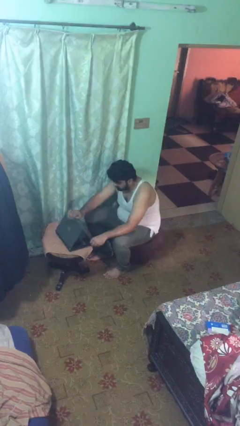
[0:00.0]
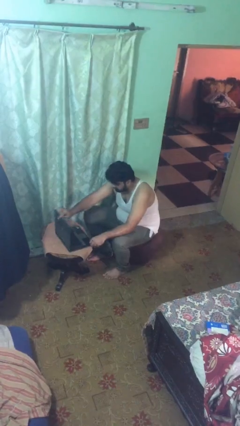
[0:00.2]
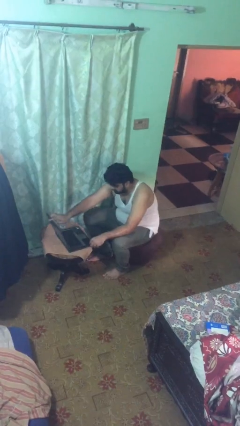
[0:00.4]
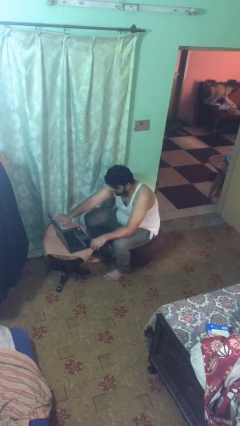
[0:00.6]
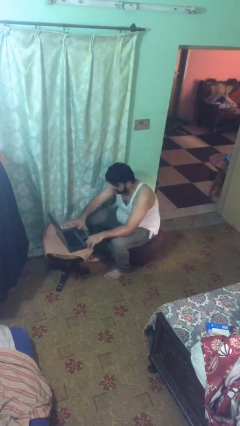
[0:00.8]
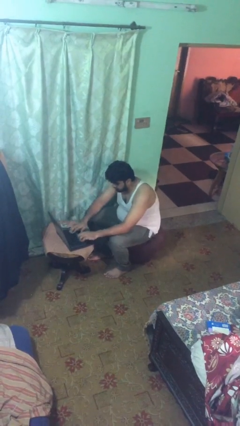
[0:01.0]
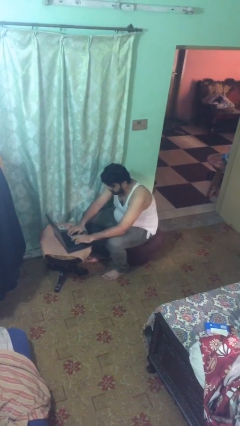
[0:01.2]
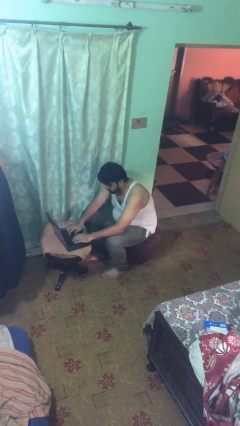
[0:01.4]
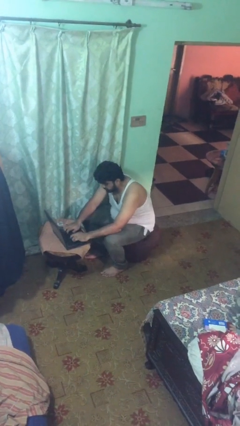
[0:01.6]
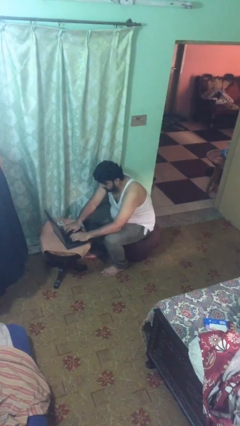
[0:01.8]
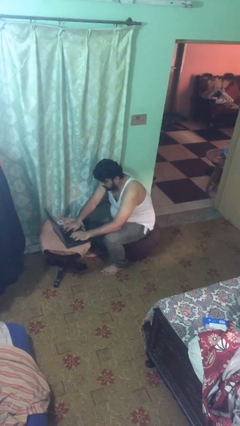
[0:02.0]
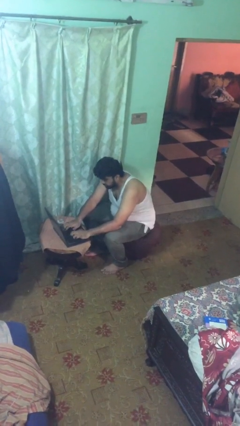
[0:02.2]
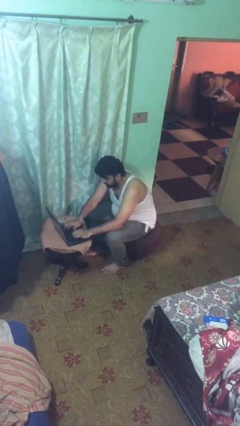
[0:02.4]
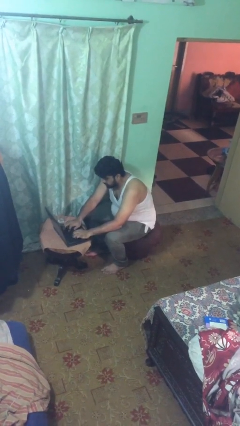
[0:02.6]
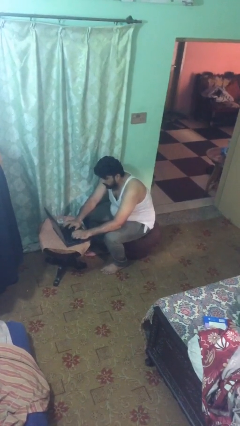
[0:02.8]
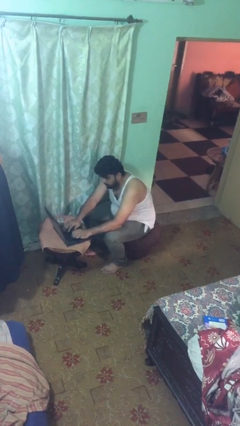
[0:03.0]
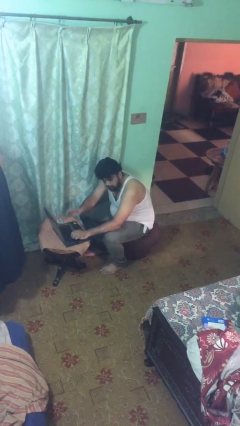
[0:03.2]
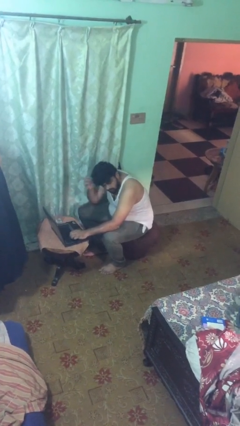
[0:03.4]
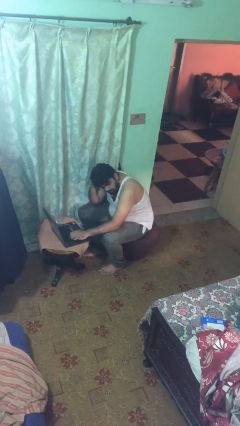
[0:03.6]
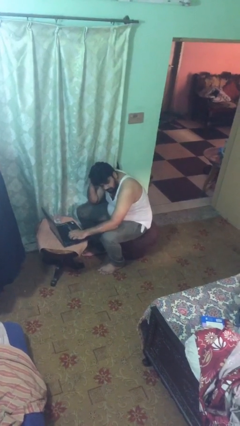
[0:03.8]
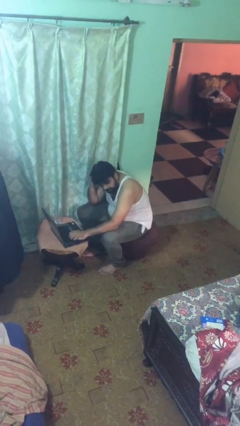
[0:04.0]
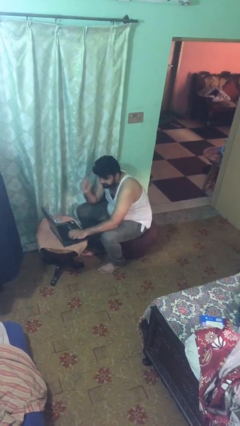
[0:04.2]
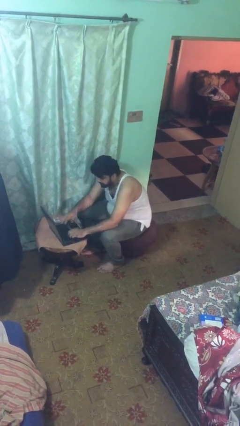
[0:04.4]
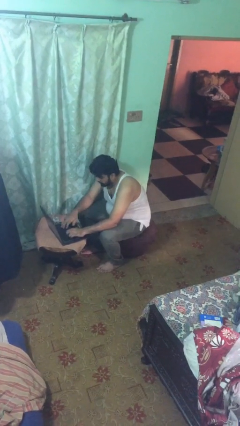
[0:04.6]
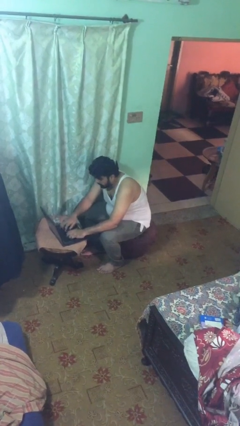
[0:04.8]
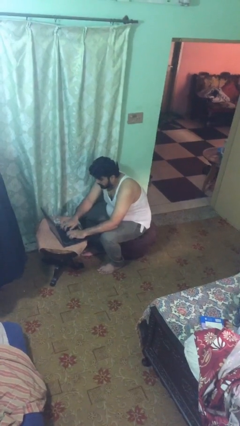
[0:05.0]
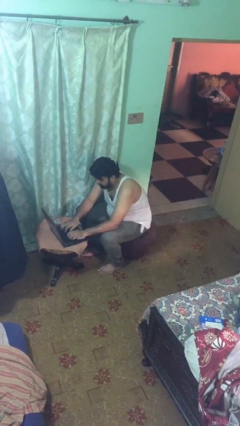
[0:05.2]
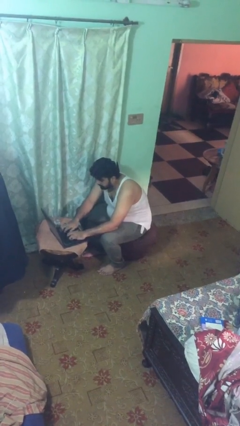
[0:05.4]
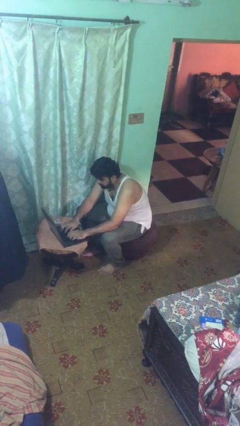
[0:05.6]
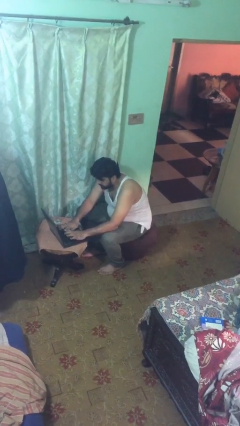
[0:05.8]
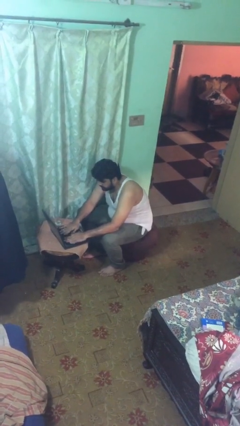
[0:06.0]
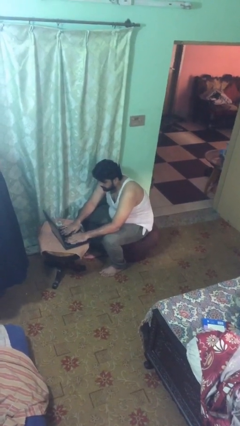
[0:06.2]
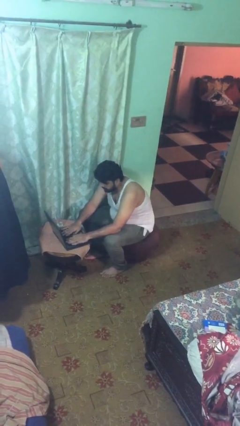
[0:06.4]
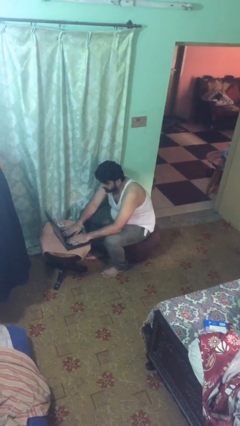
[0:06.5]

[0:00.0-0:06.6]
person interacts with laptop

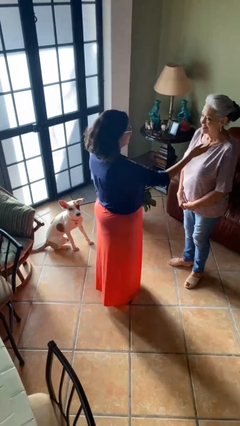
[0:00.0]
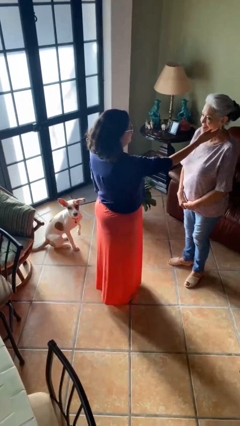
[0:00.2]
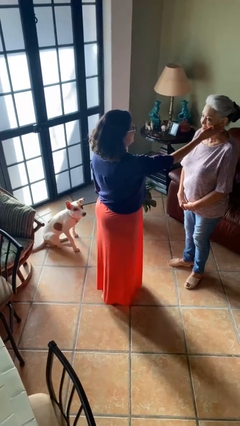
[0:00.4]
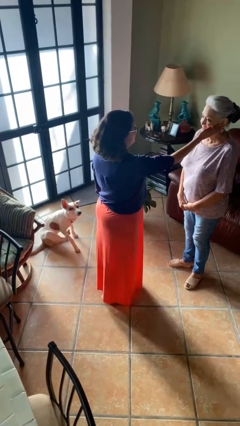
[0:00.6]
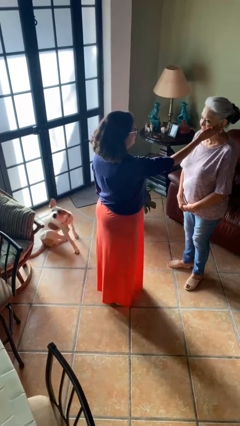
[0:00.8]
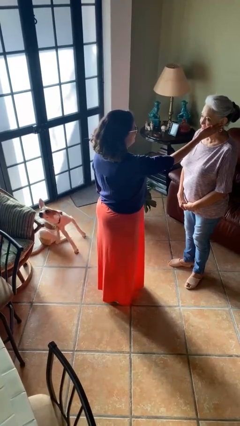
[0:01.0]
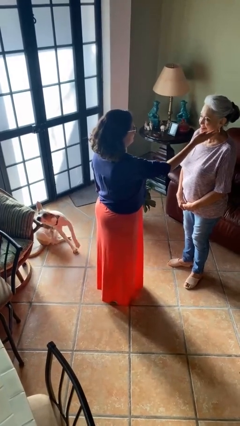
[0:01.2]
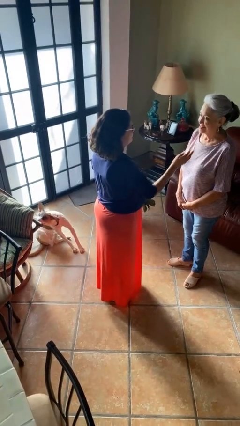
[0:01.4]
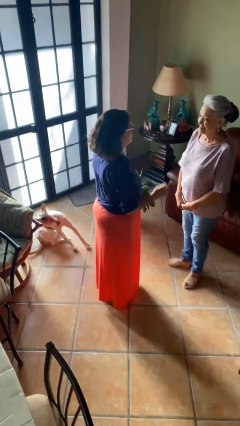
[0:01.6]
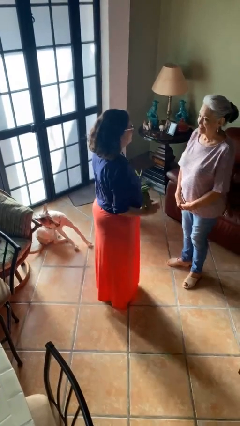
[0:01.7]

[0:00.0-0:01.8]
person touches face of person

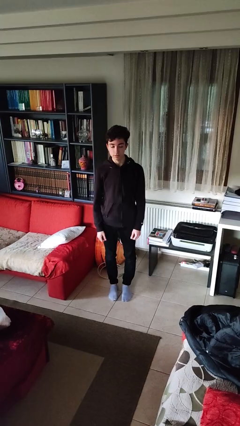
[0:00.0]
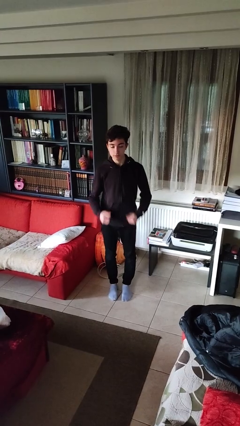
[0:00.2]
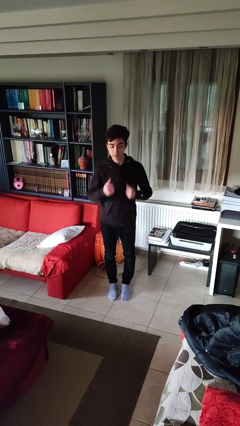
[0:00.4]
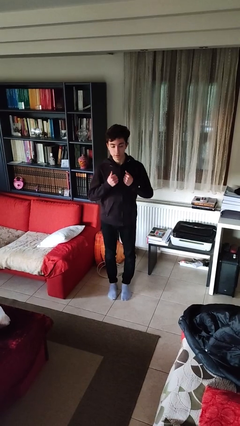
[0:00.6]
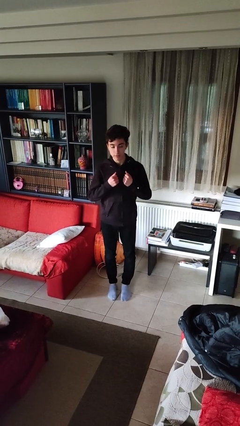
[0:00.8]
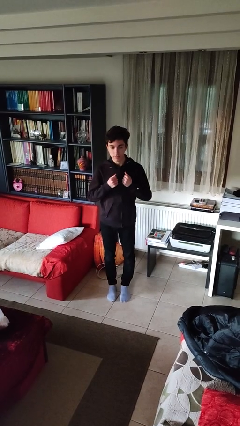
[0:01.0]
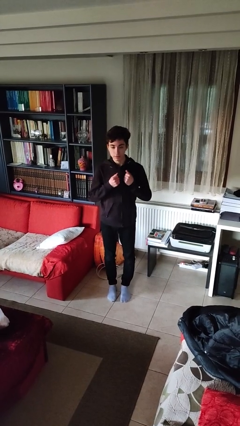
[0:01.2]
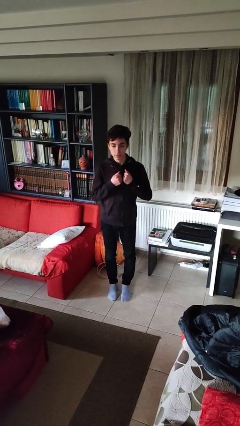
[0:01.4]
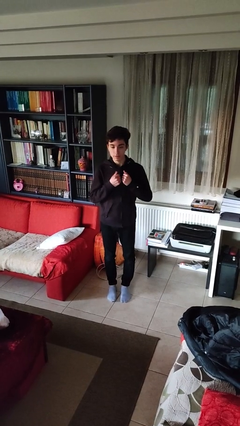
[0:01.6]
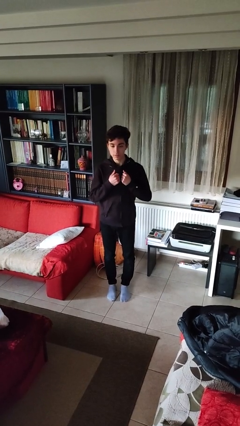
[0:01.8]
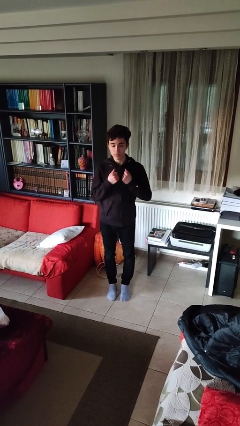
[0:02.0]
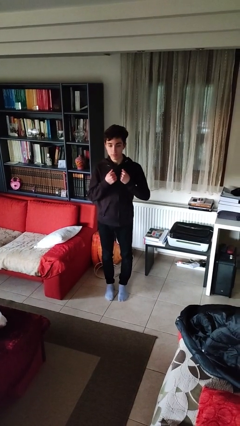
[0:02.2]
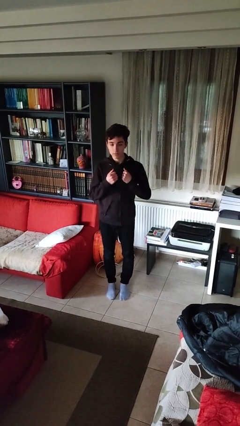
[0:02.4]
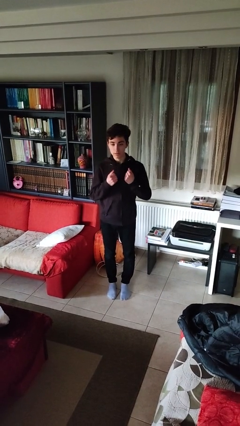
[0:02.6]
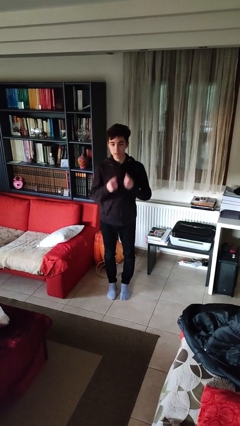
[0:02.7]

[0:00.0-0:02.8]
person drums on chest

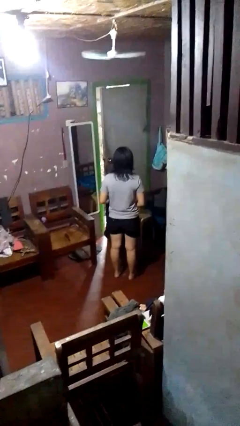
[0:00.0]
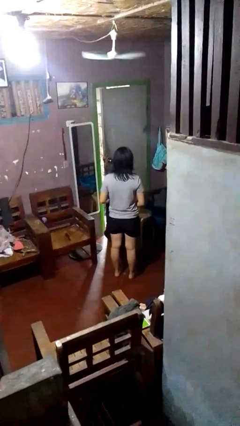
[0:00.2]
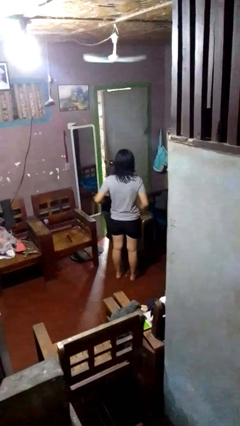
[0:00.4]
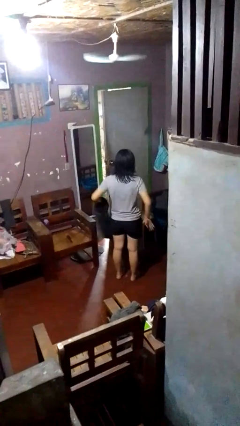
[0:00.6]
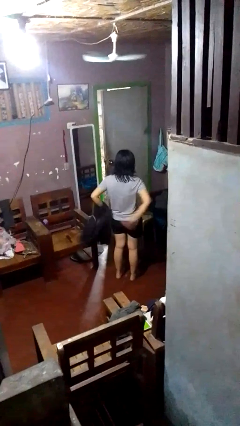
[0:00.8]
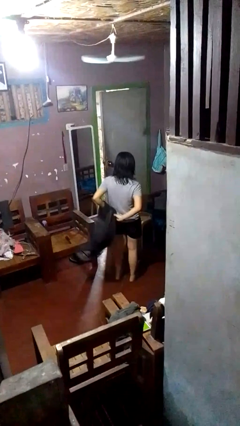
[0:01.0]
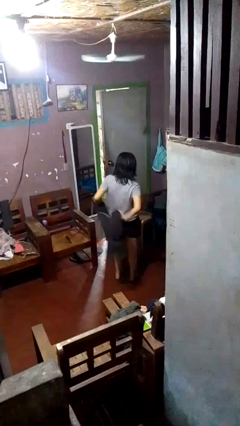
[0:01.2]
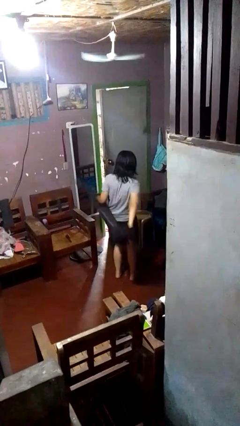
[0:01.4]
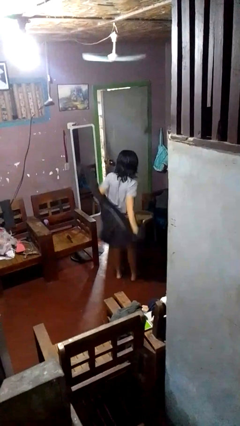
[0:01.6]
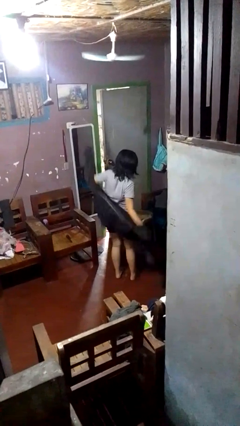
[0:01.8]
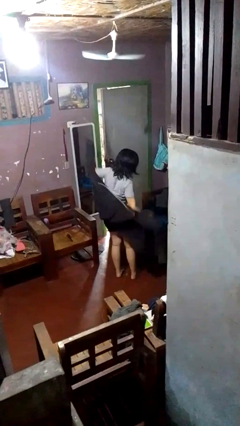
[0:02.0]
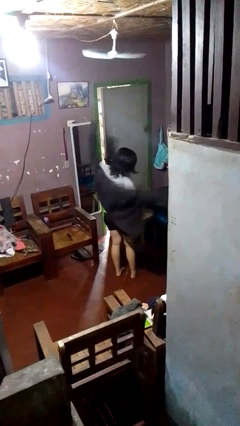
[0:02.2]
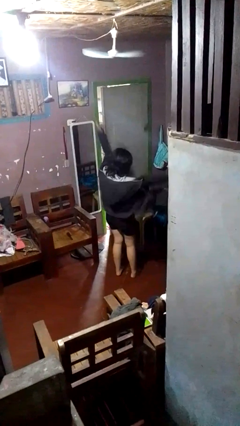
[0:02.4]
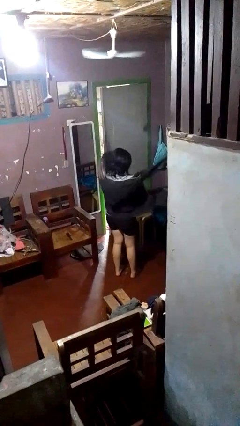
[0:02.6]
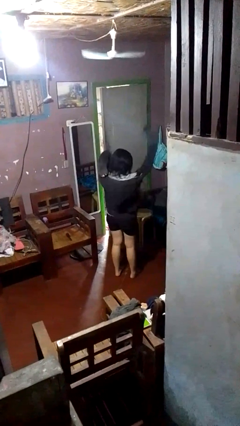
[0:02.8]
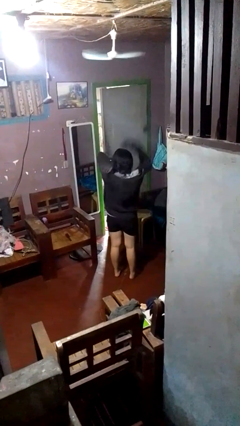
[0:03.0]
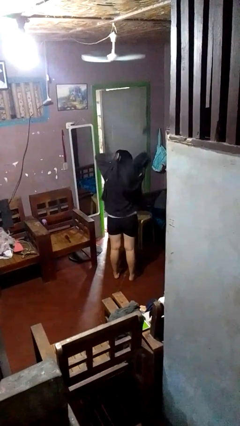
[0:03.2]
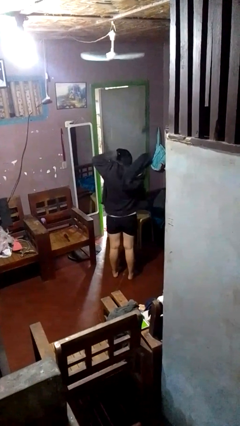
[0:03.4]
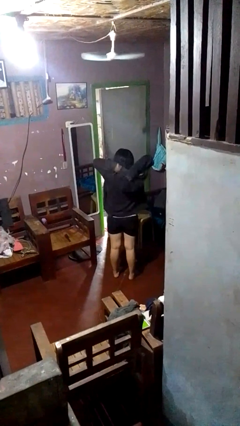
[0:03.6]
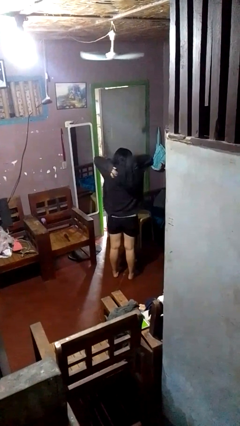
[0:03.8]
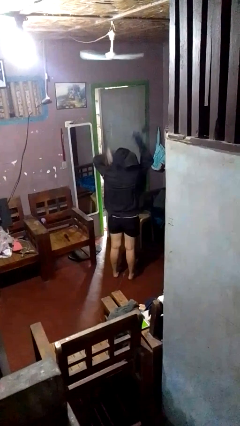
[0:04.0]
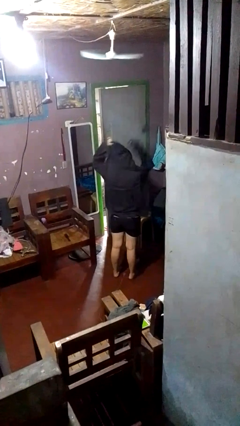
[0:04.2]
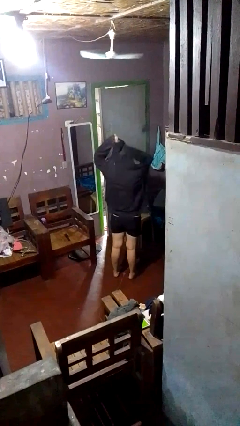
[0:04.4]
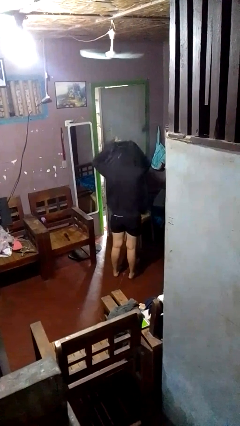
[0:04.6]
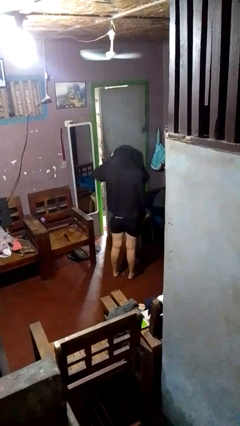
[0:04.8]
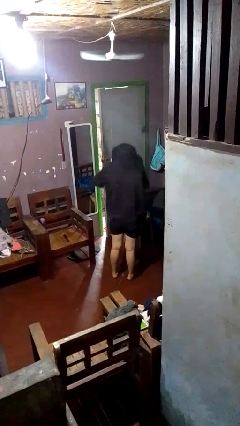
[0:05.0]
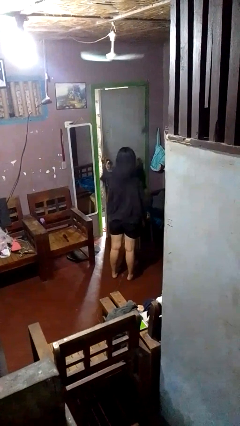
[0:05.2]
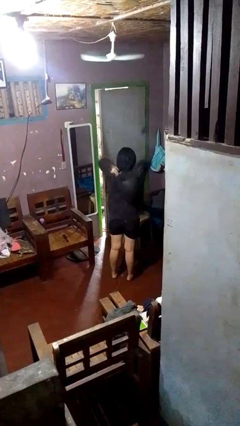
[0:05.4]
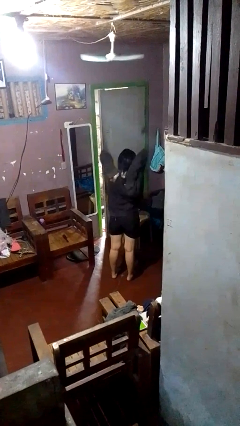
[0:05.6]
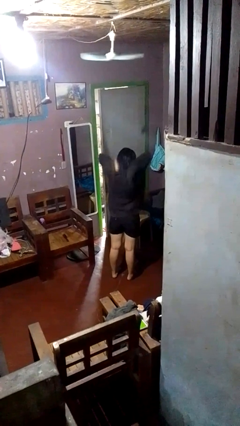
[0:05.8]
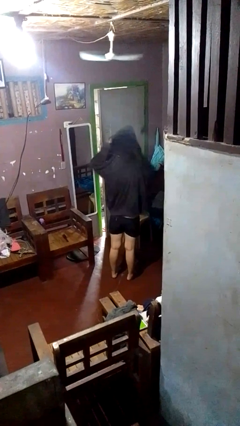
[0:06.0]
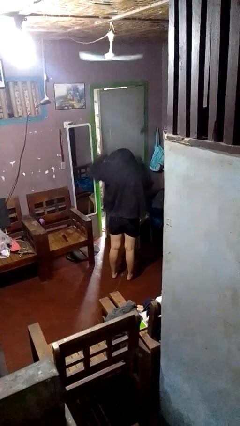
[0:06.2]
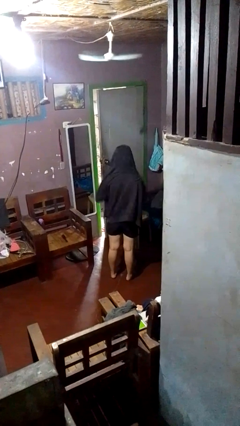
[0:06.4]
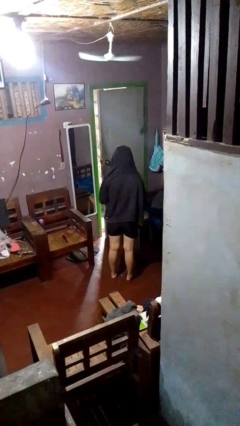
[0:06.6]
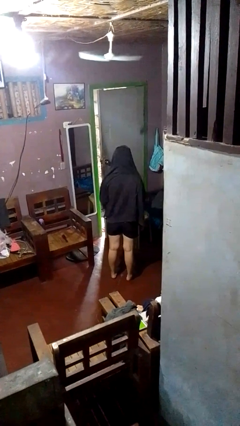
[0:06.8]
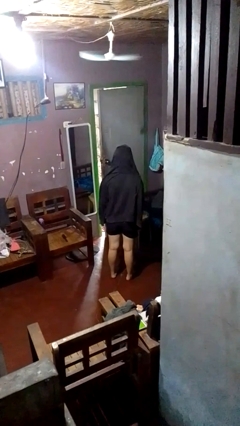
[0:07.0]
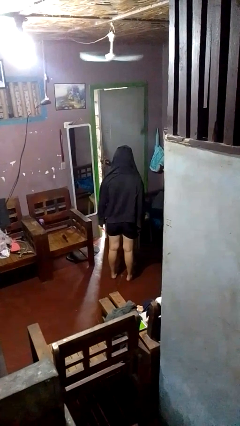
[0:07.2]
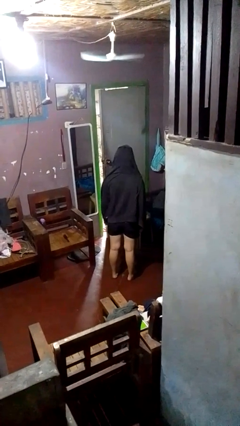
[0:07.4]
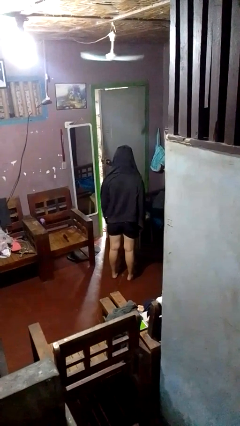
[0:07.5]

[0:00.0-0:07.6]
person puts on hoodie
